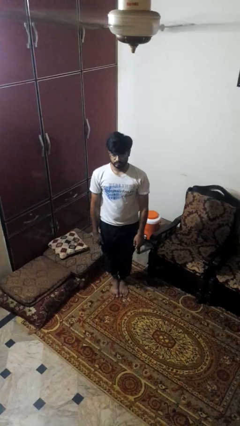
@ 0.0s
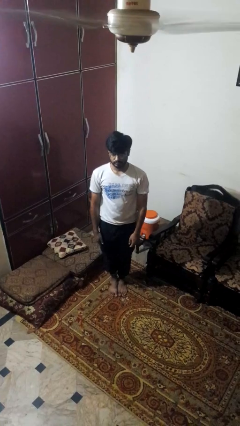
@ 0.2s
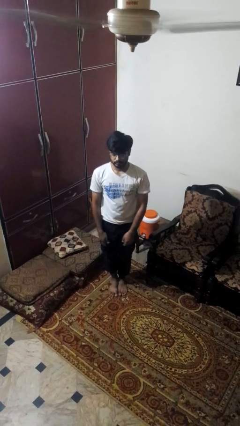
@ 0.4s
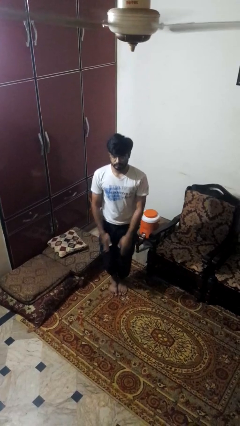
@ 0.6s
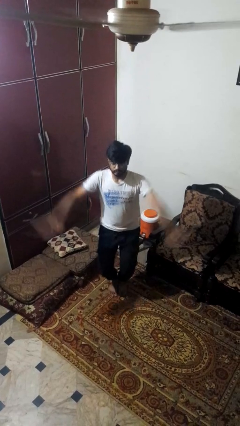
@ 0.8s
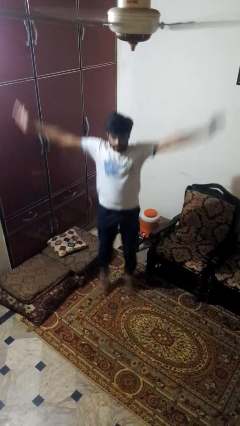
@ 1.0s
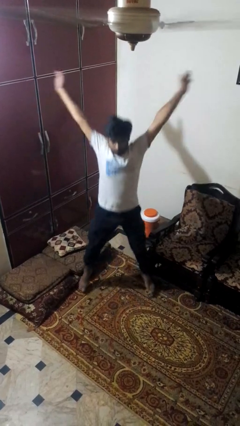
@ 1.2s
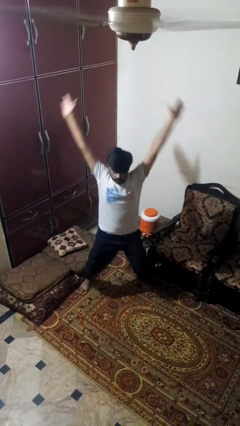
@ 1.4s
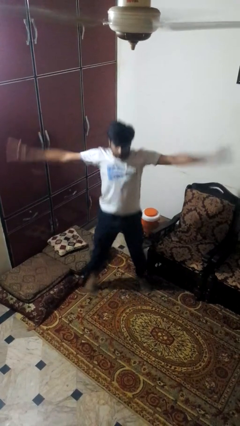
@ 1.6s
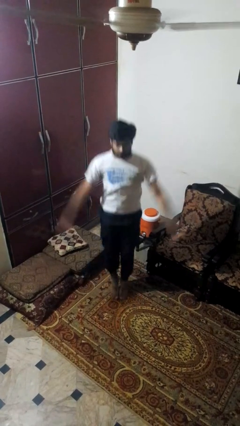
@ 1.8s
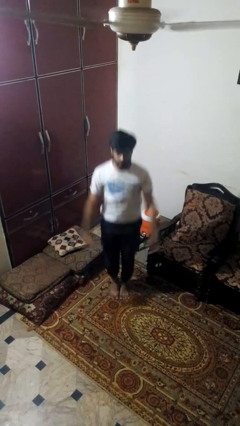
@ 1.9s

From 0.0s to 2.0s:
person exercises with jumping jacks

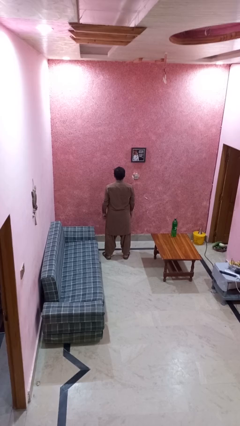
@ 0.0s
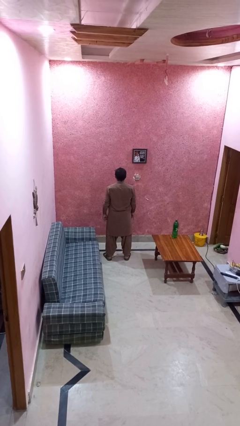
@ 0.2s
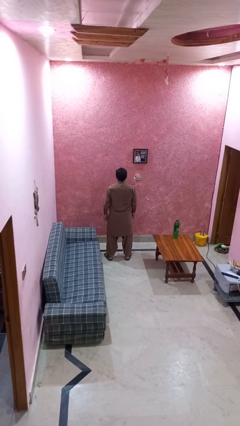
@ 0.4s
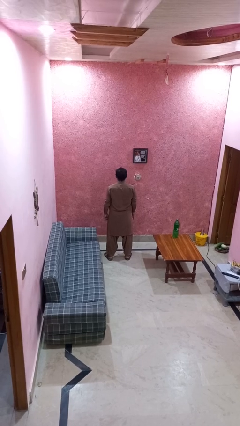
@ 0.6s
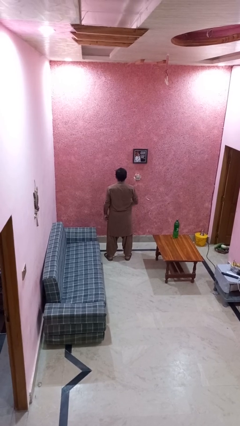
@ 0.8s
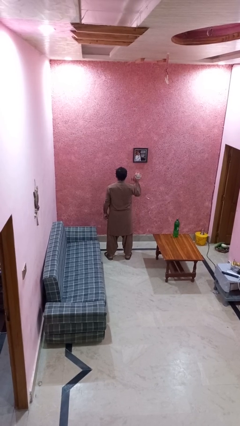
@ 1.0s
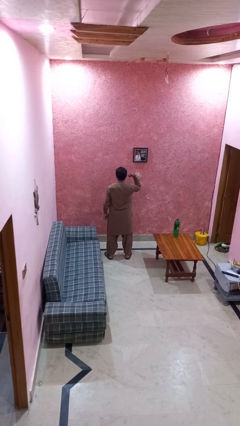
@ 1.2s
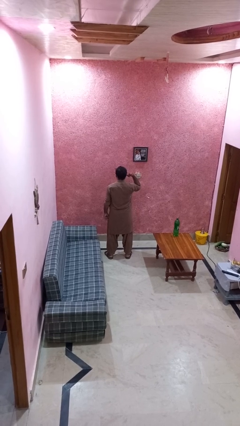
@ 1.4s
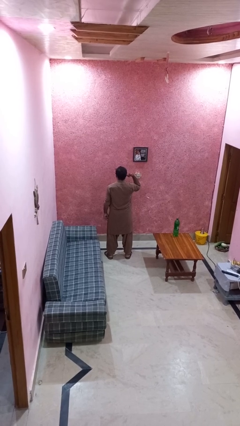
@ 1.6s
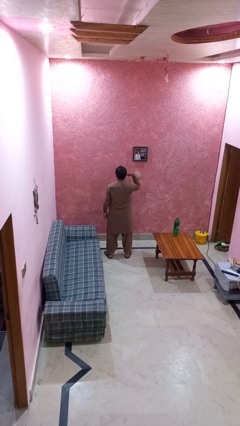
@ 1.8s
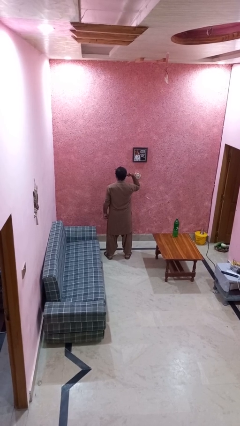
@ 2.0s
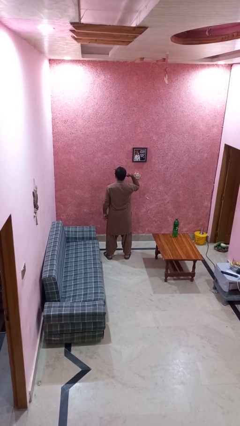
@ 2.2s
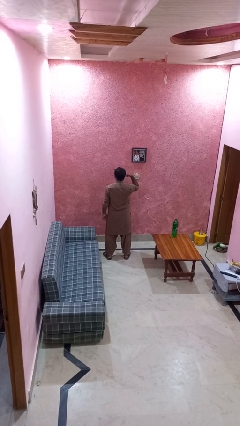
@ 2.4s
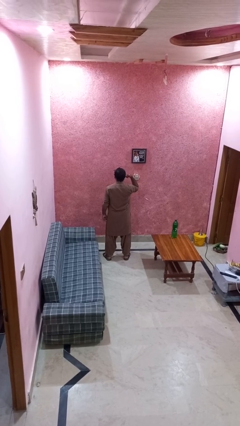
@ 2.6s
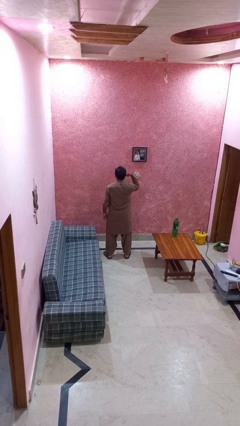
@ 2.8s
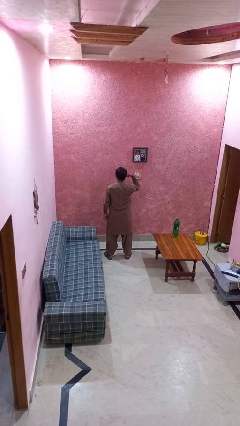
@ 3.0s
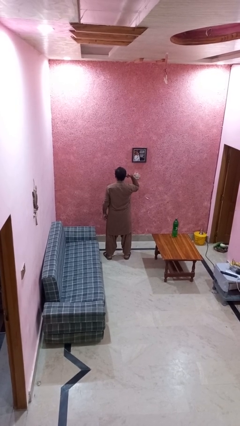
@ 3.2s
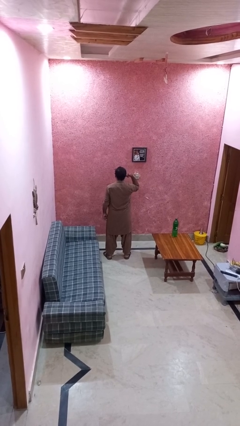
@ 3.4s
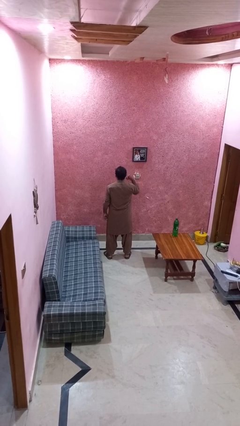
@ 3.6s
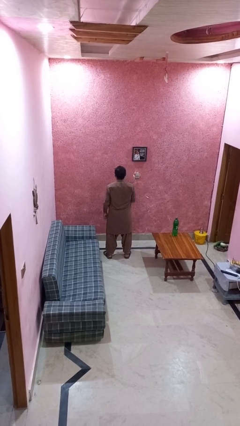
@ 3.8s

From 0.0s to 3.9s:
person gestures call me

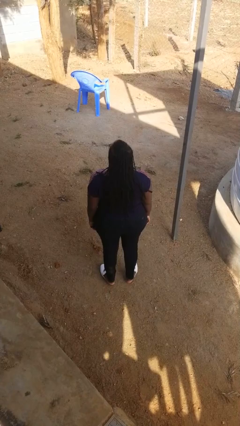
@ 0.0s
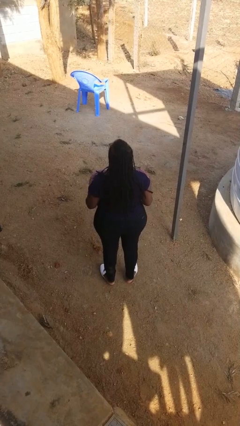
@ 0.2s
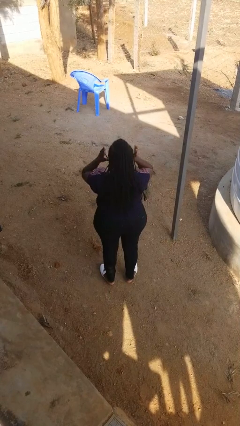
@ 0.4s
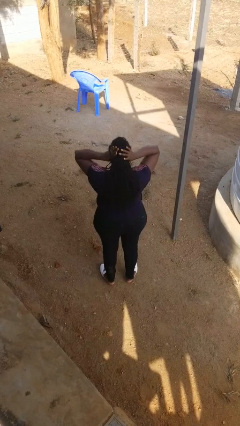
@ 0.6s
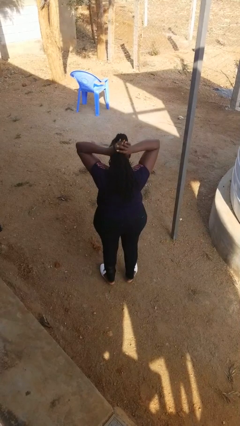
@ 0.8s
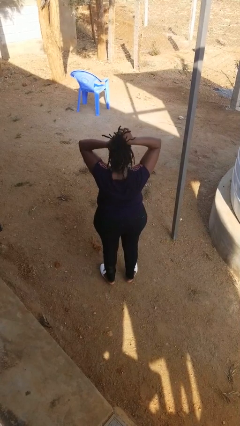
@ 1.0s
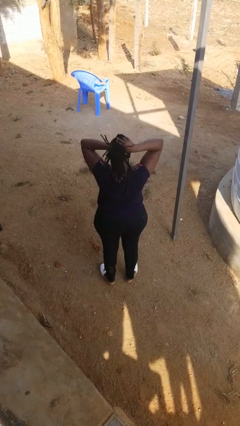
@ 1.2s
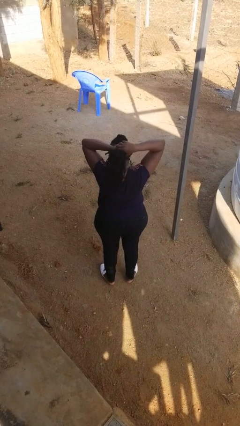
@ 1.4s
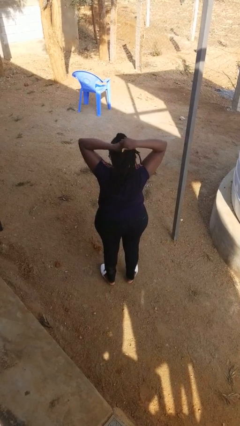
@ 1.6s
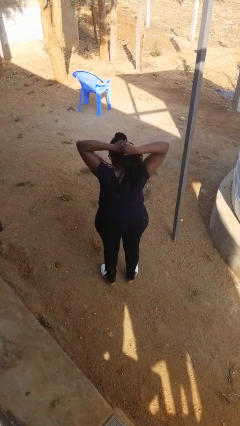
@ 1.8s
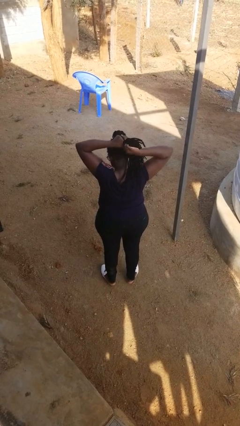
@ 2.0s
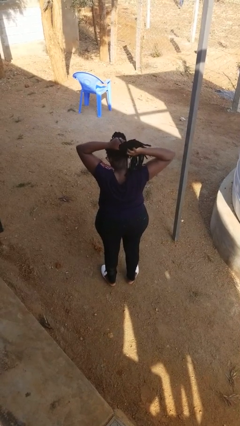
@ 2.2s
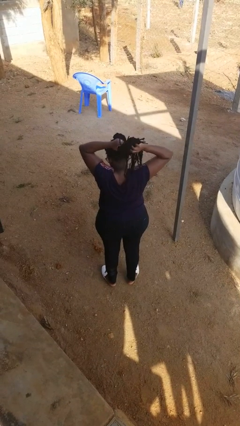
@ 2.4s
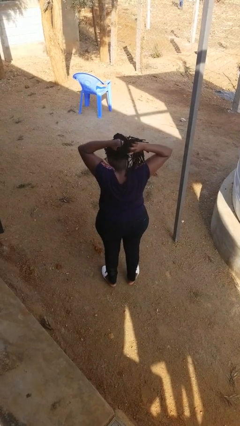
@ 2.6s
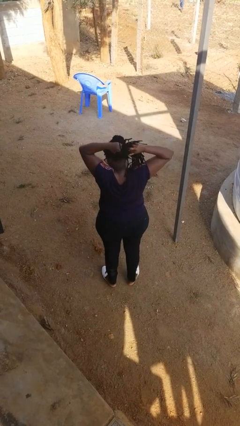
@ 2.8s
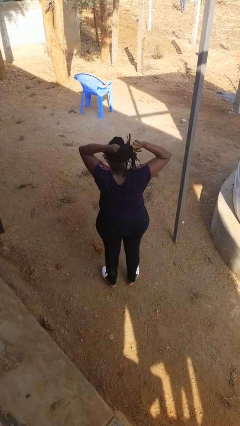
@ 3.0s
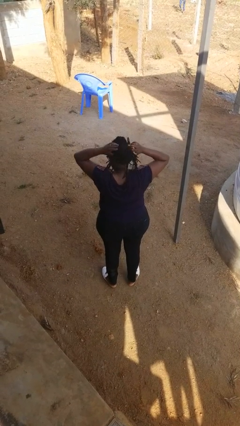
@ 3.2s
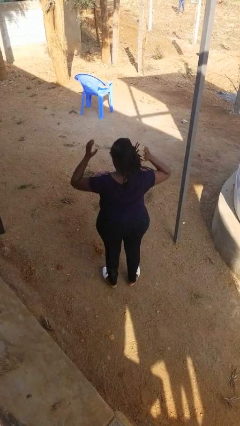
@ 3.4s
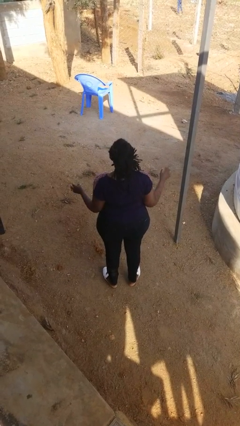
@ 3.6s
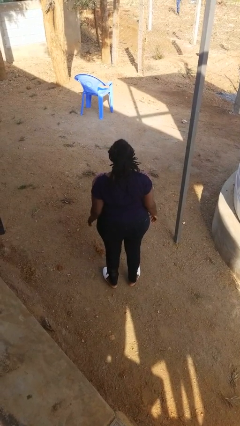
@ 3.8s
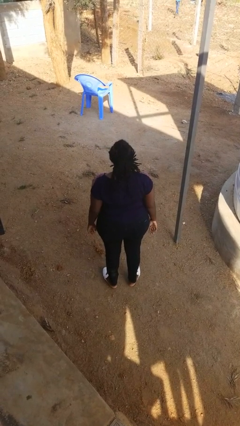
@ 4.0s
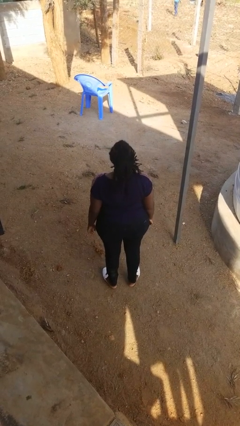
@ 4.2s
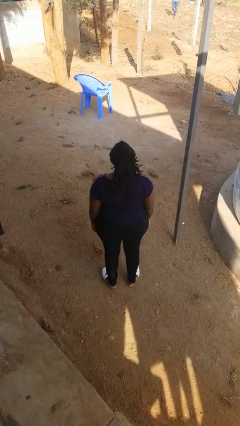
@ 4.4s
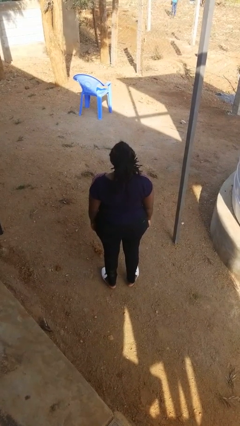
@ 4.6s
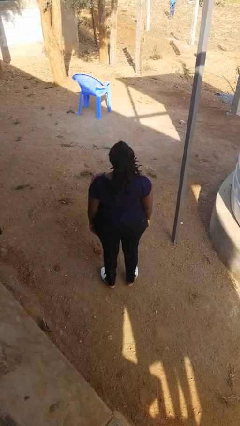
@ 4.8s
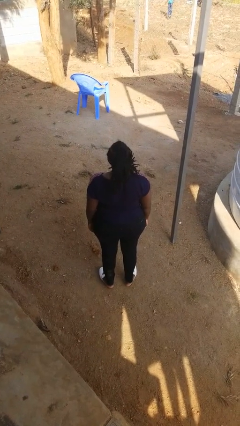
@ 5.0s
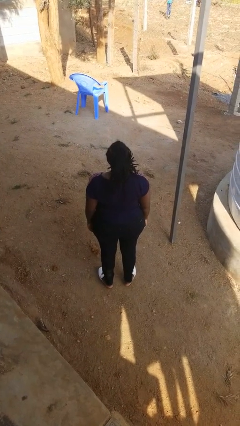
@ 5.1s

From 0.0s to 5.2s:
person puts hair in ponytail

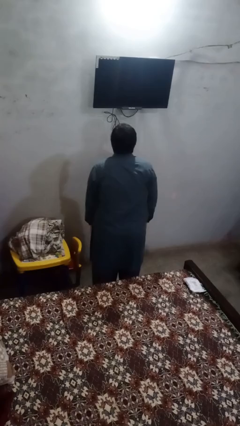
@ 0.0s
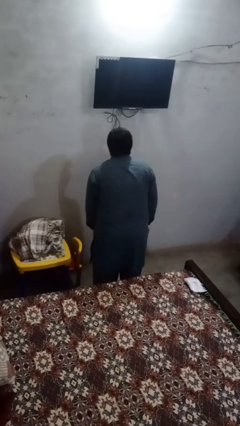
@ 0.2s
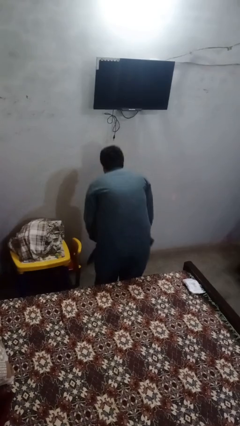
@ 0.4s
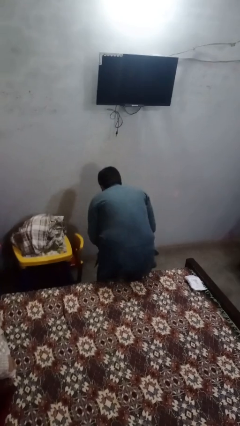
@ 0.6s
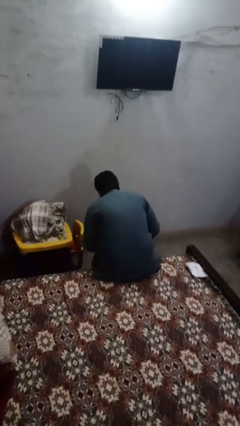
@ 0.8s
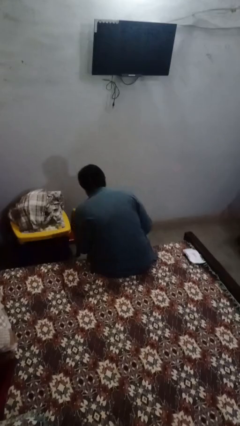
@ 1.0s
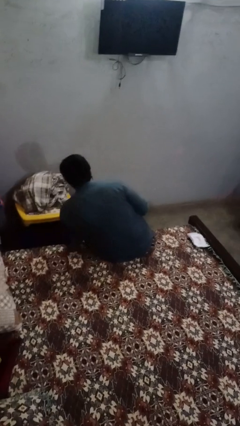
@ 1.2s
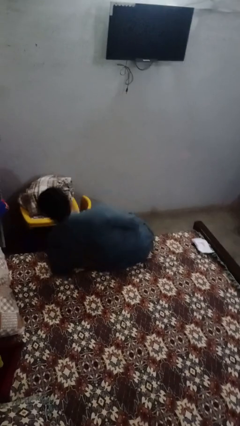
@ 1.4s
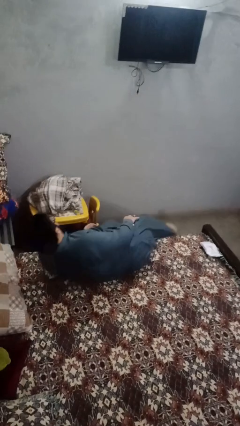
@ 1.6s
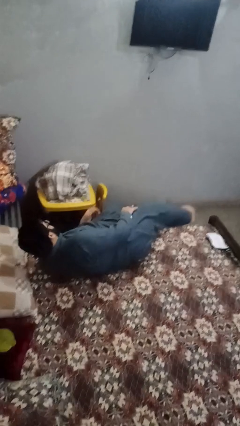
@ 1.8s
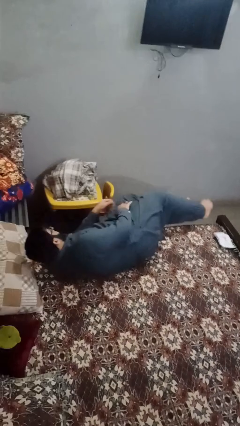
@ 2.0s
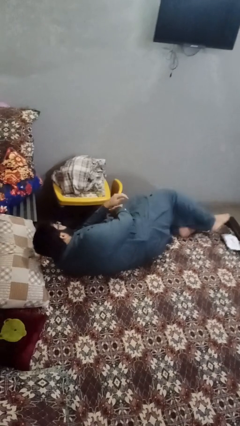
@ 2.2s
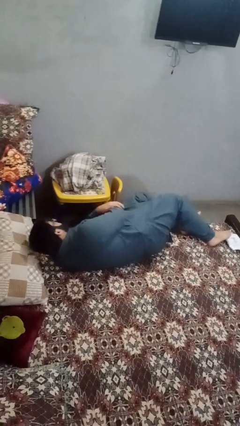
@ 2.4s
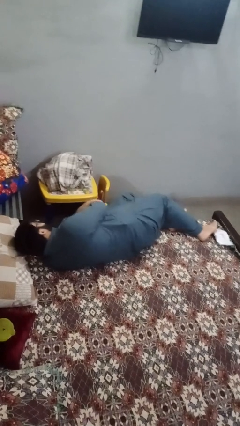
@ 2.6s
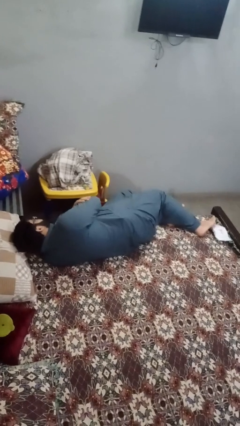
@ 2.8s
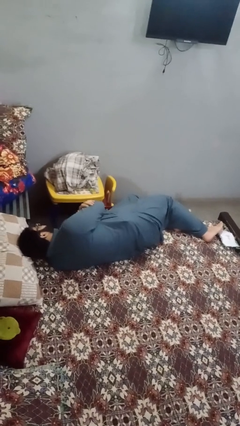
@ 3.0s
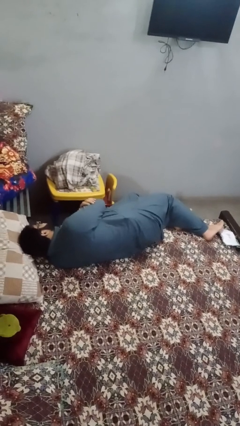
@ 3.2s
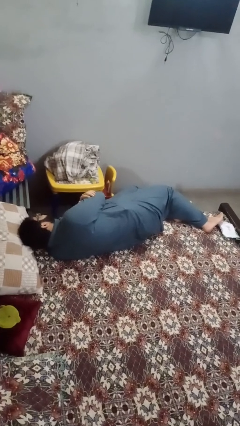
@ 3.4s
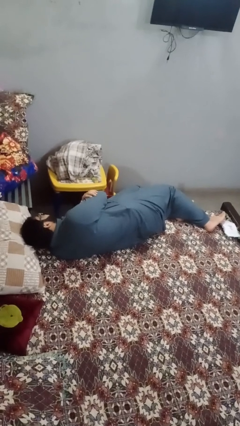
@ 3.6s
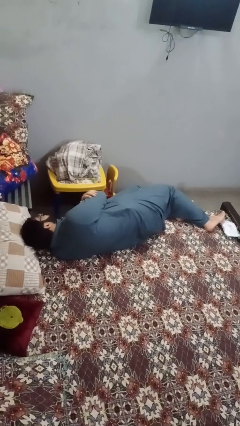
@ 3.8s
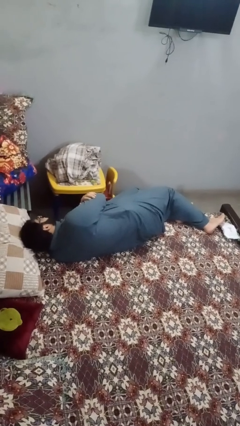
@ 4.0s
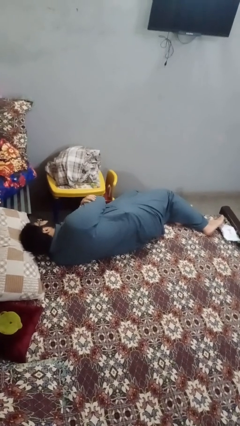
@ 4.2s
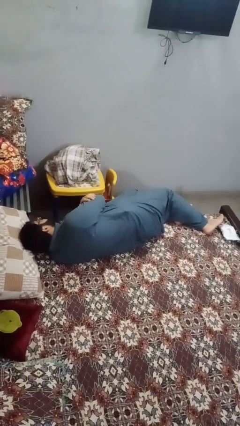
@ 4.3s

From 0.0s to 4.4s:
person lies down on bed

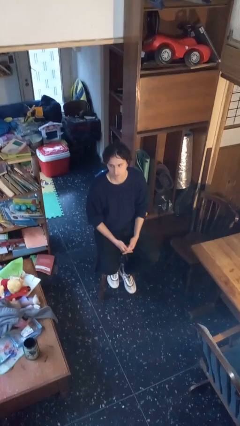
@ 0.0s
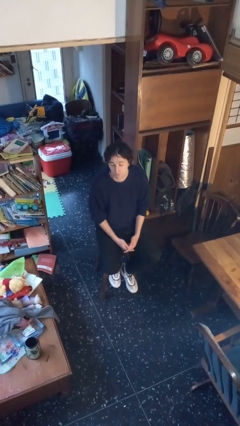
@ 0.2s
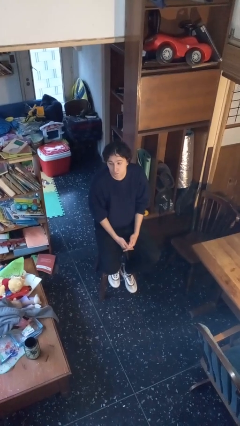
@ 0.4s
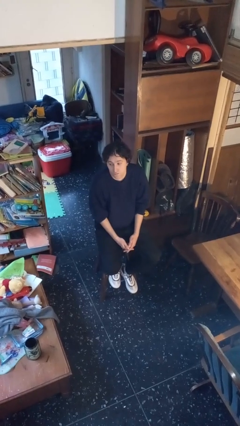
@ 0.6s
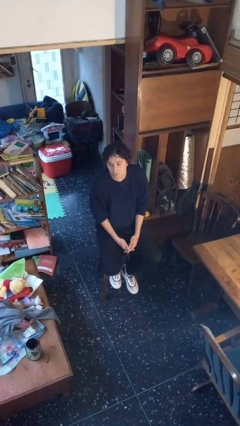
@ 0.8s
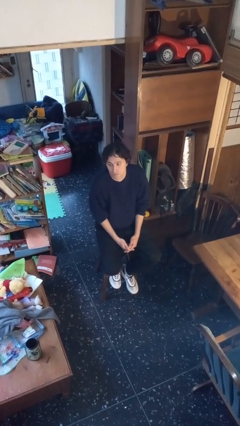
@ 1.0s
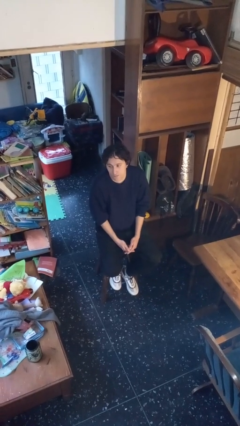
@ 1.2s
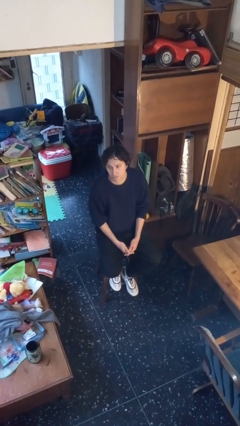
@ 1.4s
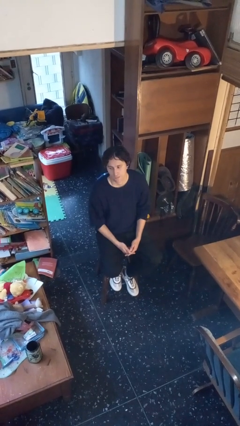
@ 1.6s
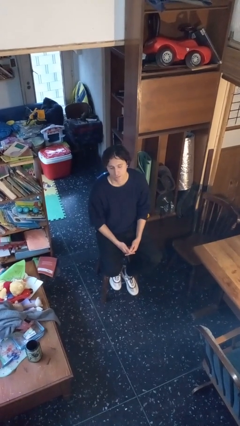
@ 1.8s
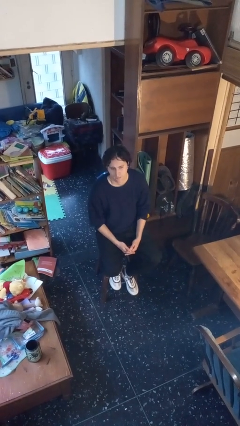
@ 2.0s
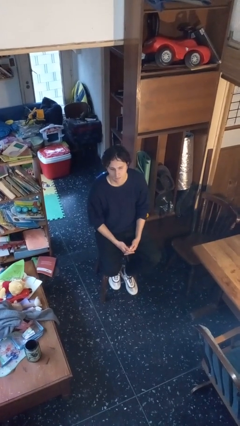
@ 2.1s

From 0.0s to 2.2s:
person shrugs

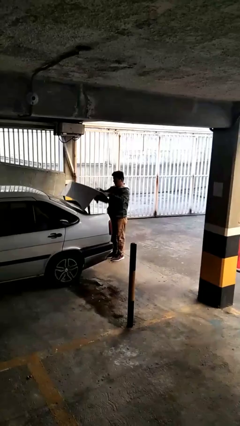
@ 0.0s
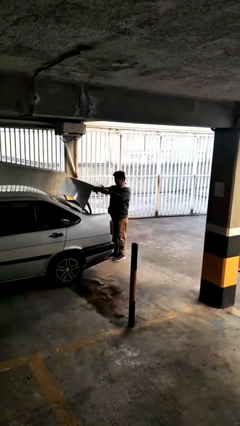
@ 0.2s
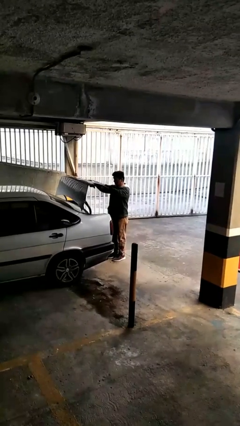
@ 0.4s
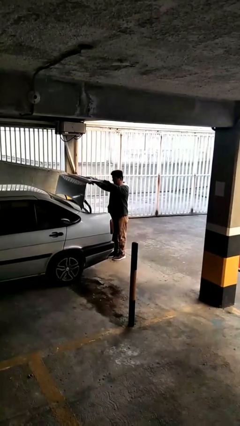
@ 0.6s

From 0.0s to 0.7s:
person opens car trunk
